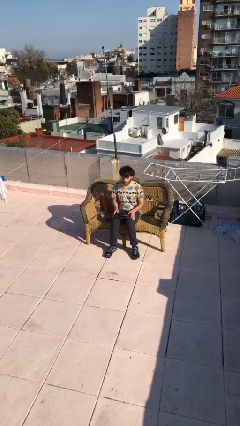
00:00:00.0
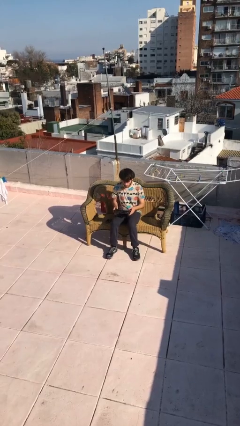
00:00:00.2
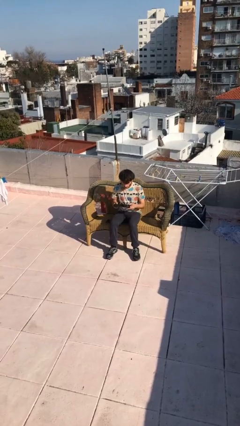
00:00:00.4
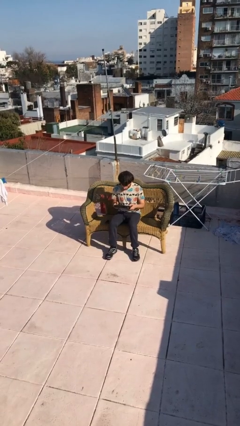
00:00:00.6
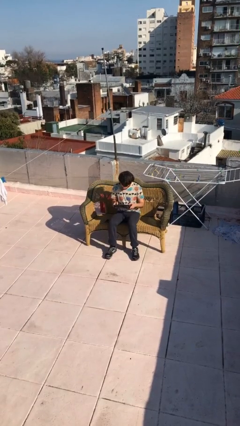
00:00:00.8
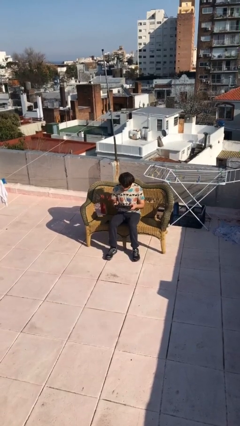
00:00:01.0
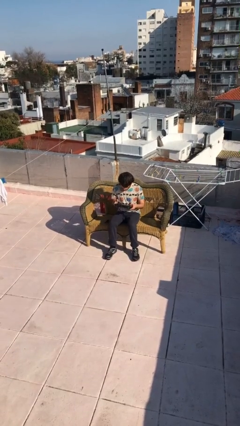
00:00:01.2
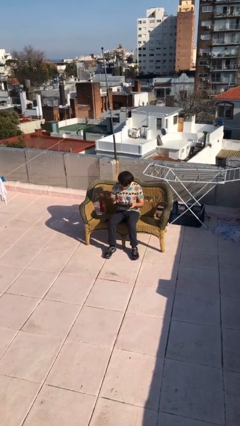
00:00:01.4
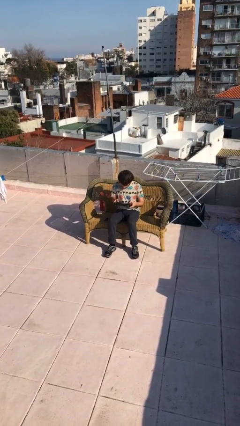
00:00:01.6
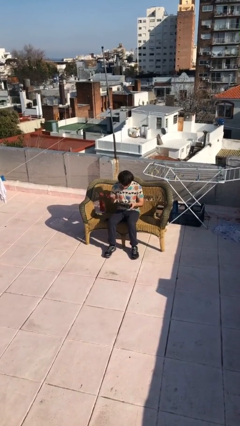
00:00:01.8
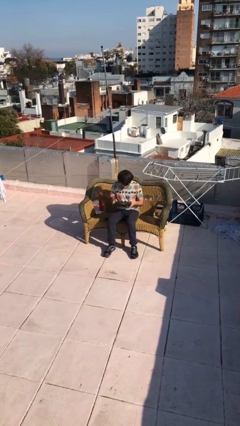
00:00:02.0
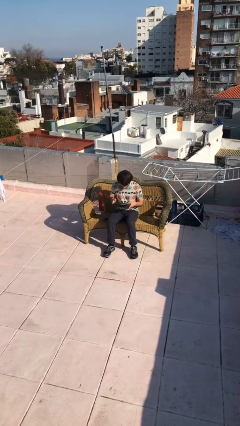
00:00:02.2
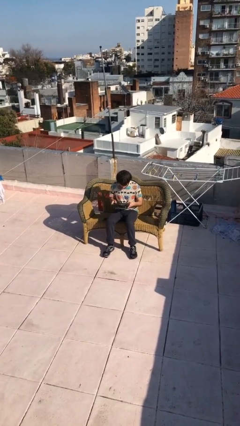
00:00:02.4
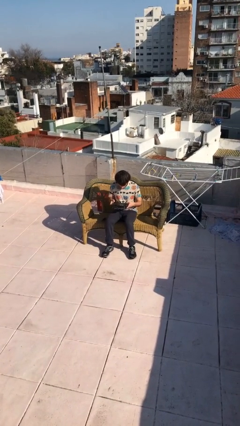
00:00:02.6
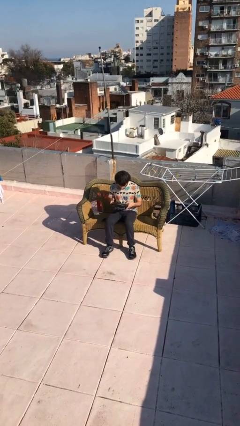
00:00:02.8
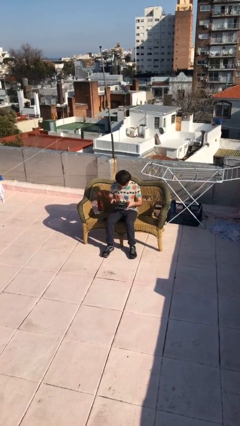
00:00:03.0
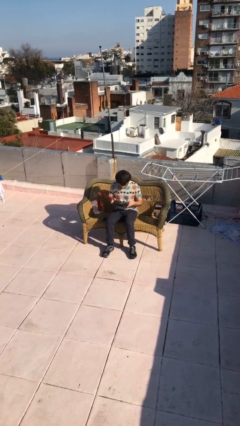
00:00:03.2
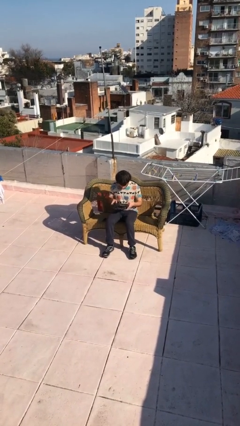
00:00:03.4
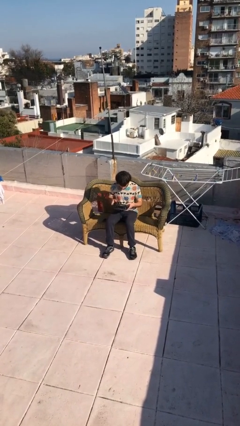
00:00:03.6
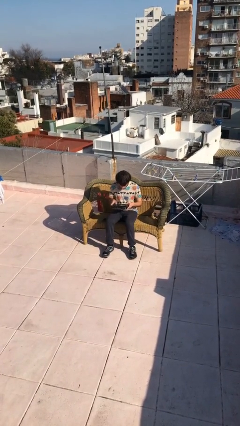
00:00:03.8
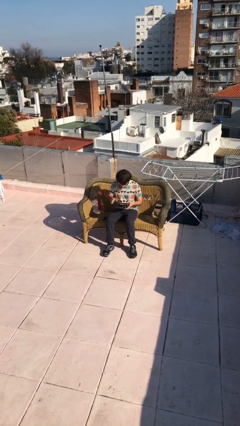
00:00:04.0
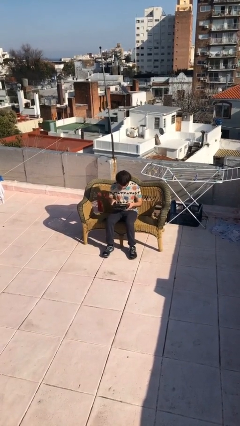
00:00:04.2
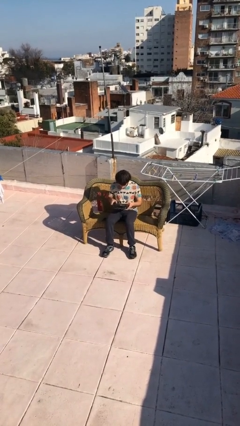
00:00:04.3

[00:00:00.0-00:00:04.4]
person interacts with handheld game

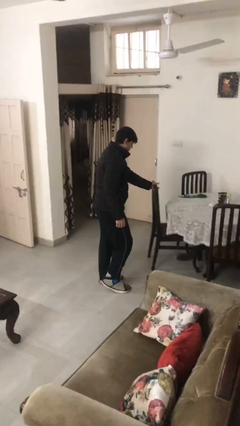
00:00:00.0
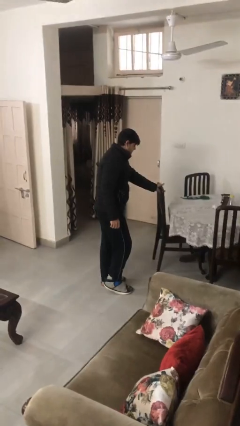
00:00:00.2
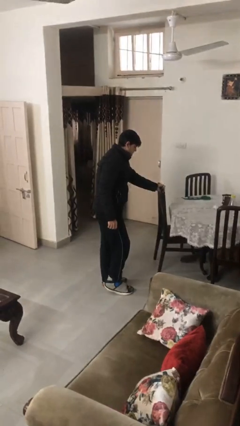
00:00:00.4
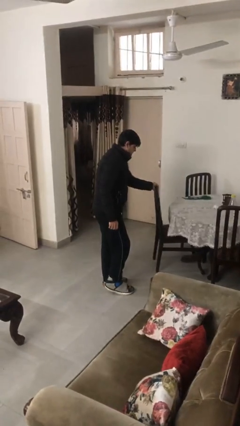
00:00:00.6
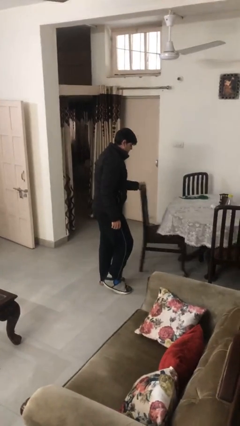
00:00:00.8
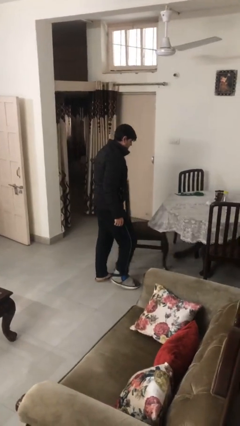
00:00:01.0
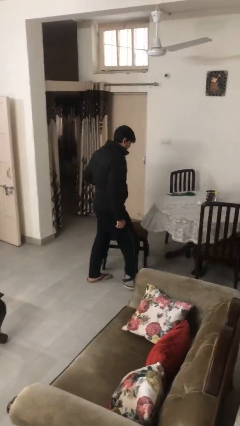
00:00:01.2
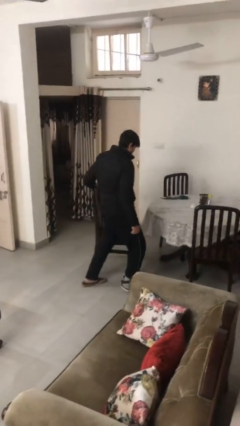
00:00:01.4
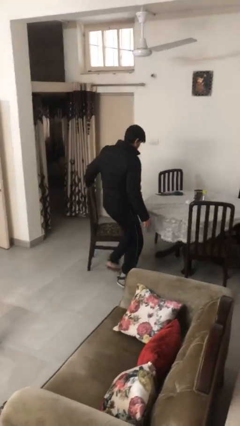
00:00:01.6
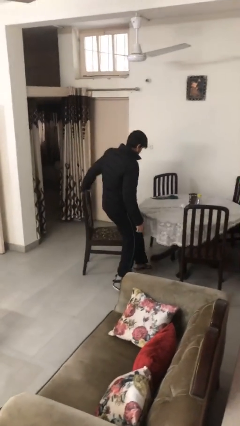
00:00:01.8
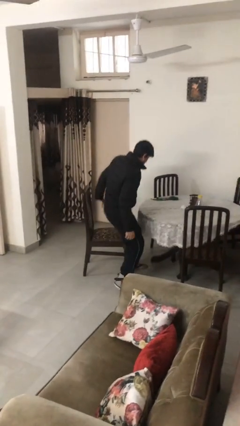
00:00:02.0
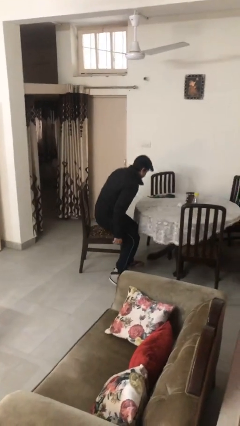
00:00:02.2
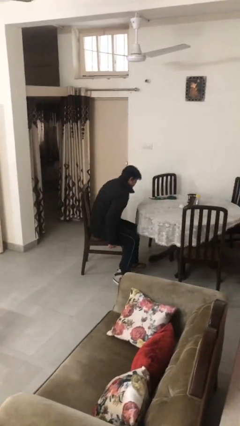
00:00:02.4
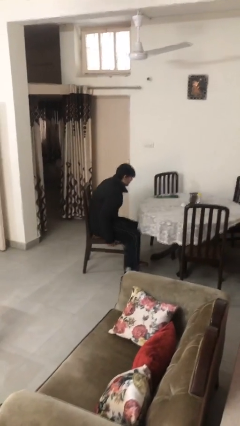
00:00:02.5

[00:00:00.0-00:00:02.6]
person sits down

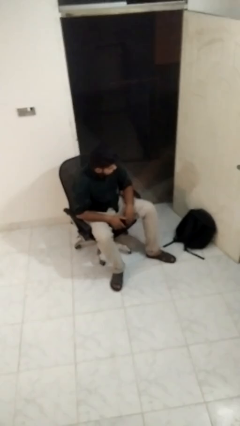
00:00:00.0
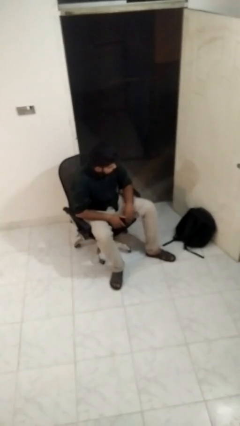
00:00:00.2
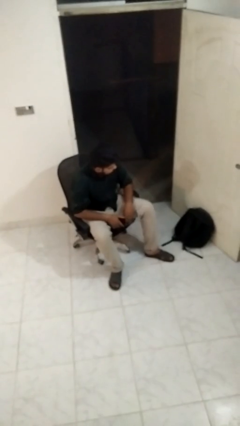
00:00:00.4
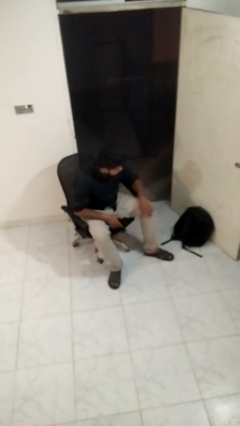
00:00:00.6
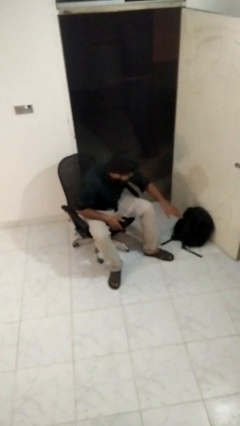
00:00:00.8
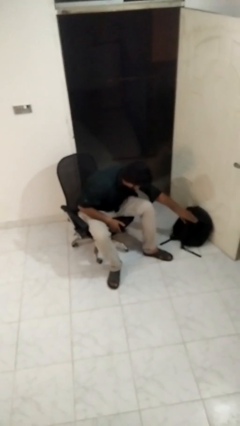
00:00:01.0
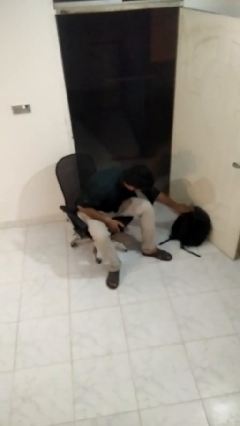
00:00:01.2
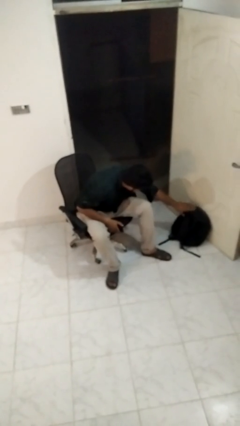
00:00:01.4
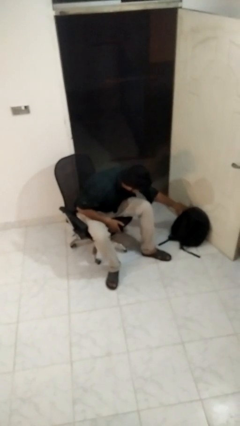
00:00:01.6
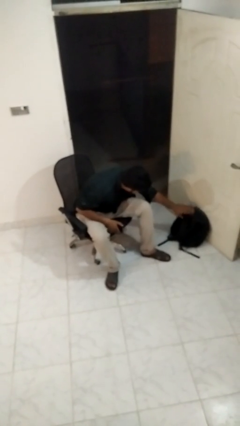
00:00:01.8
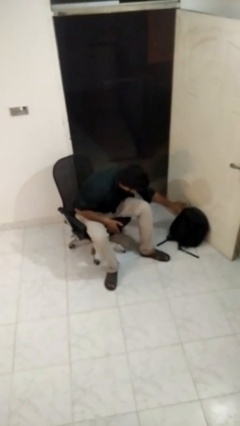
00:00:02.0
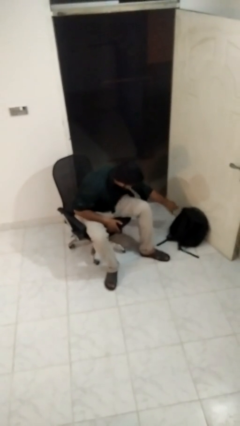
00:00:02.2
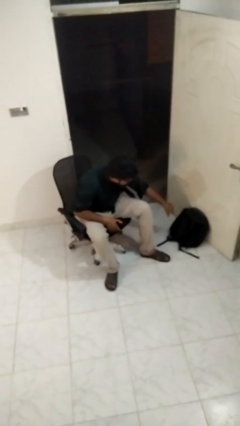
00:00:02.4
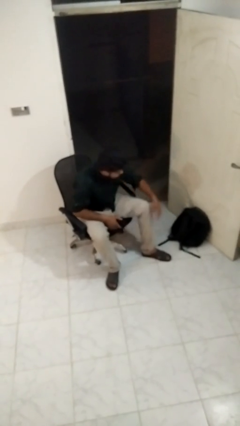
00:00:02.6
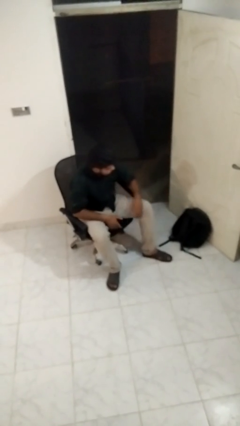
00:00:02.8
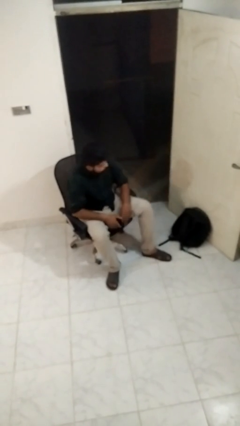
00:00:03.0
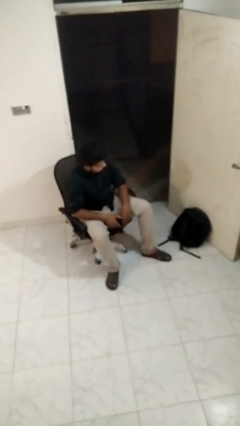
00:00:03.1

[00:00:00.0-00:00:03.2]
person waves hand over object

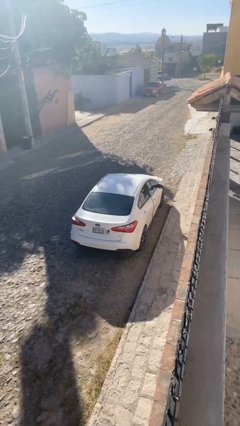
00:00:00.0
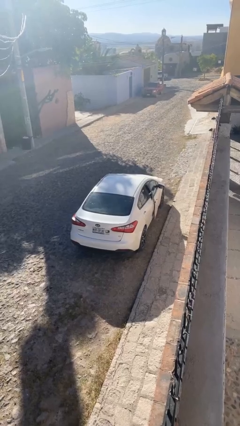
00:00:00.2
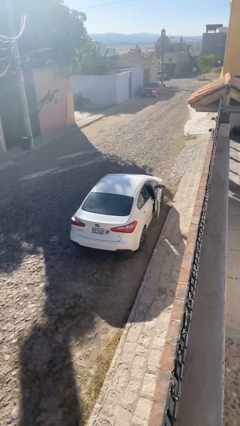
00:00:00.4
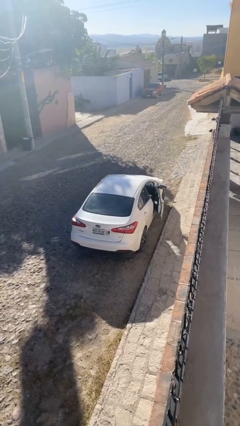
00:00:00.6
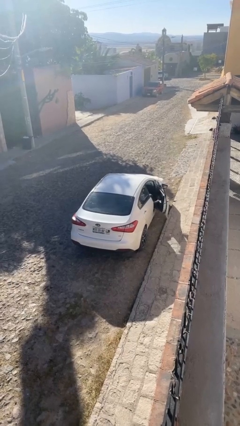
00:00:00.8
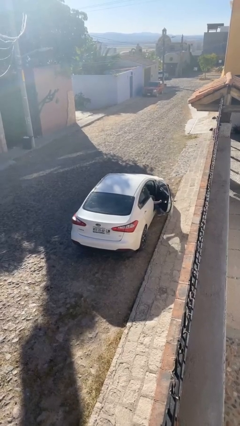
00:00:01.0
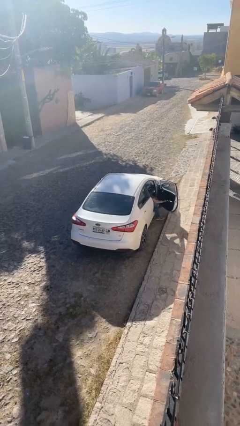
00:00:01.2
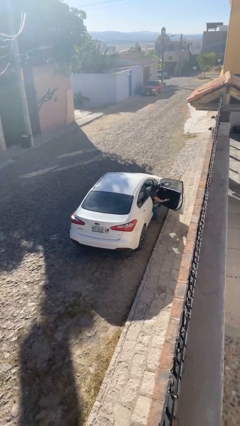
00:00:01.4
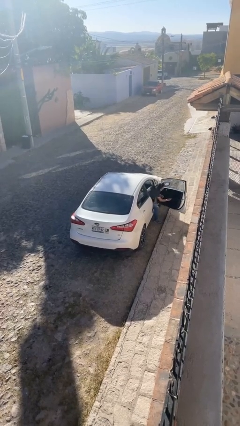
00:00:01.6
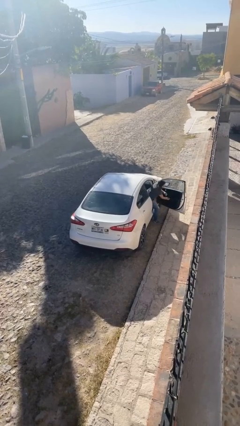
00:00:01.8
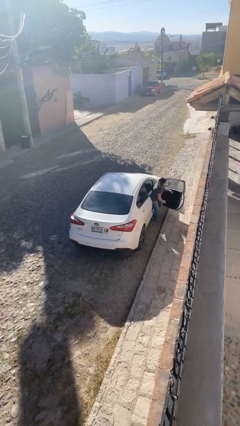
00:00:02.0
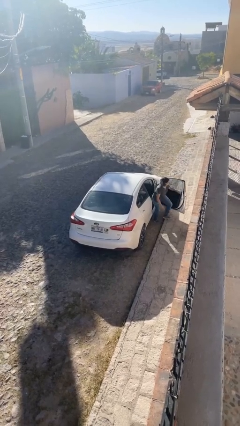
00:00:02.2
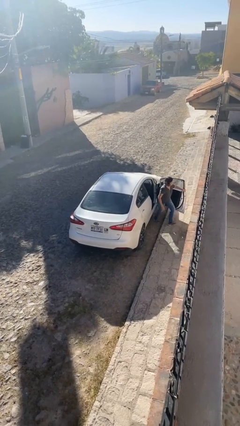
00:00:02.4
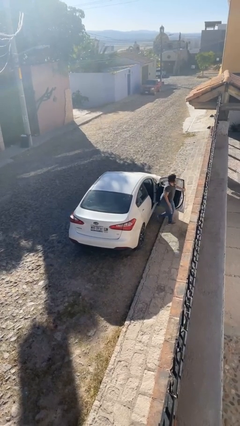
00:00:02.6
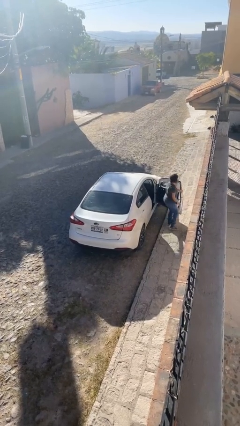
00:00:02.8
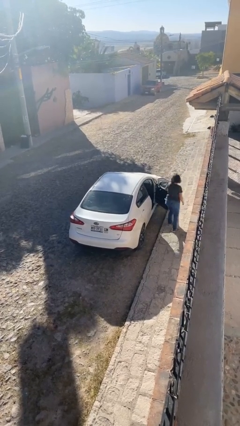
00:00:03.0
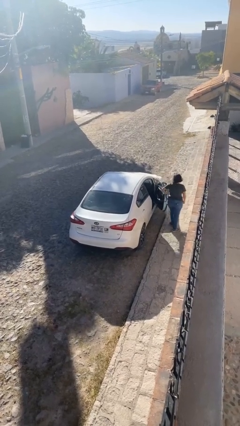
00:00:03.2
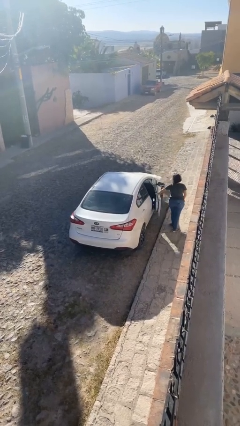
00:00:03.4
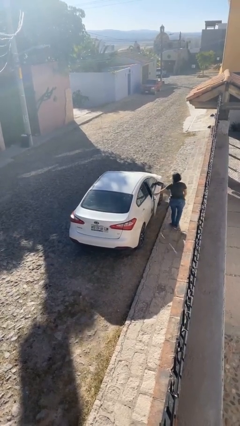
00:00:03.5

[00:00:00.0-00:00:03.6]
car drops off person

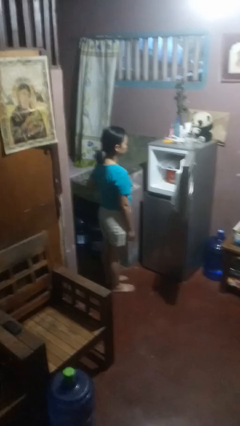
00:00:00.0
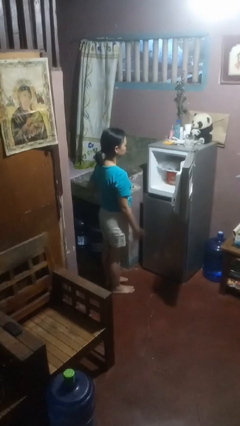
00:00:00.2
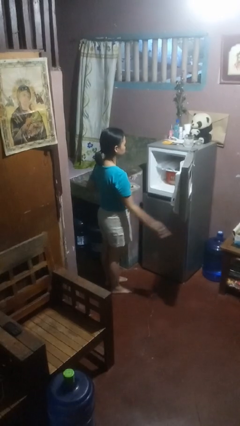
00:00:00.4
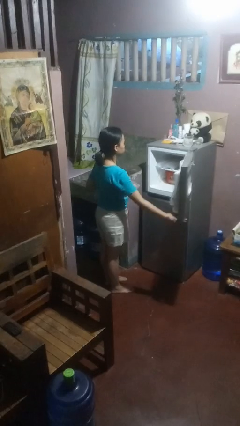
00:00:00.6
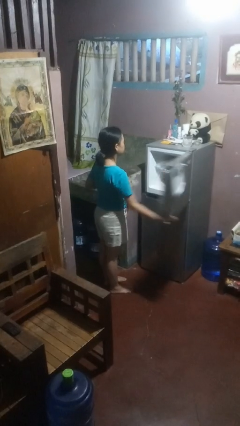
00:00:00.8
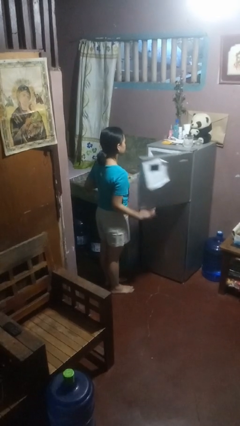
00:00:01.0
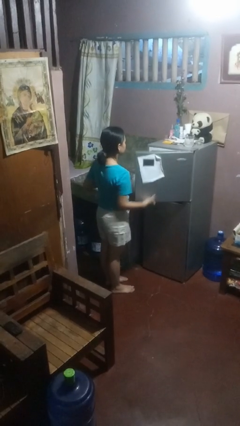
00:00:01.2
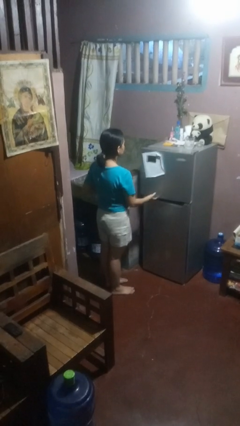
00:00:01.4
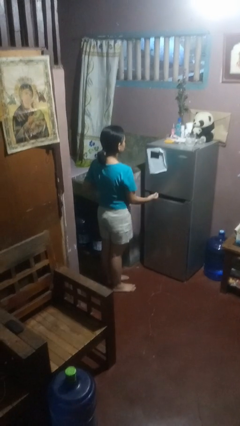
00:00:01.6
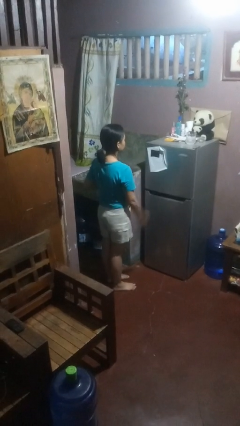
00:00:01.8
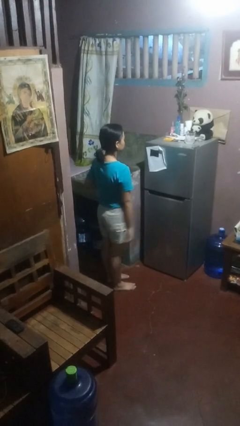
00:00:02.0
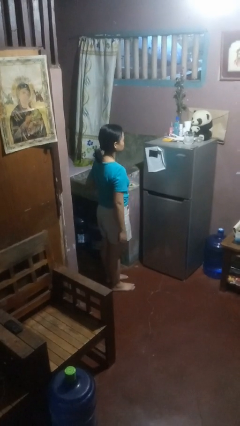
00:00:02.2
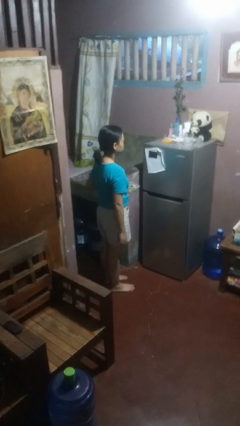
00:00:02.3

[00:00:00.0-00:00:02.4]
person closes refrigerator

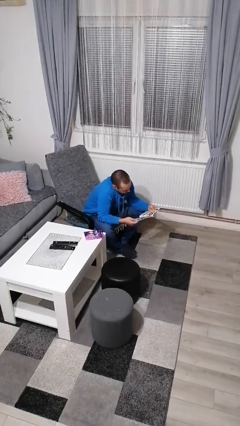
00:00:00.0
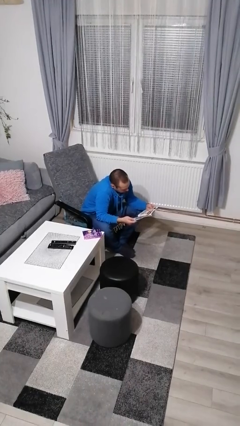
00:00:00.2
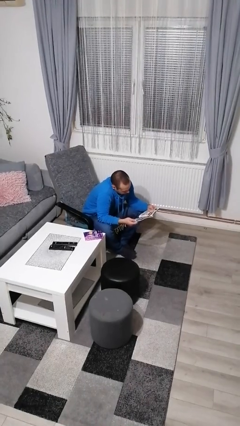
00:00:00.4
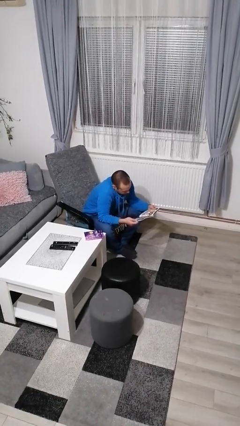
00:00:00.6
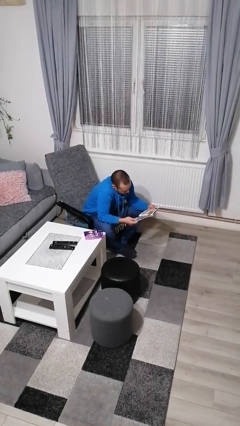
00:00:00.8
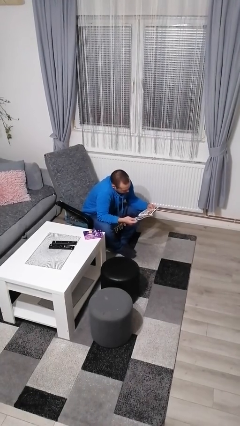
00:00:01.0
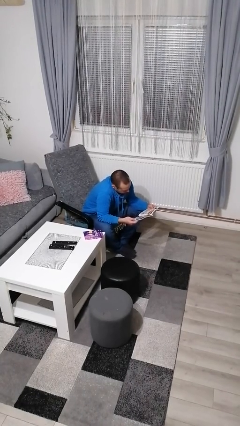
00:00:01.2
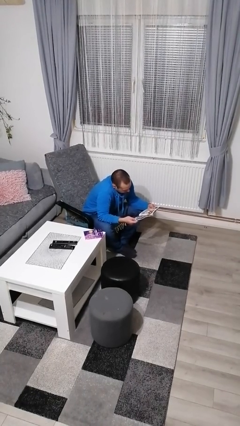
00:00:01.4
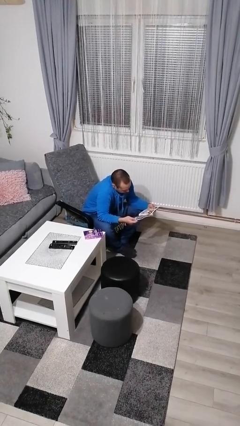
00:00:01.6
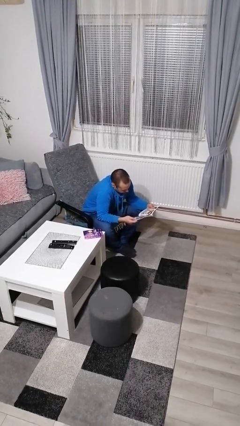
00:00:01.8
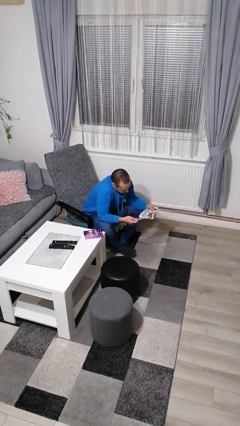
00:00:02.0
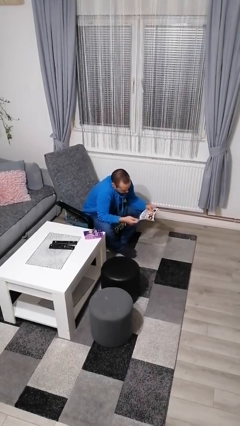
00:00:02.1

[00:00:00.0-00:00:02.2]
person reads magazine
